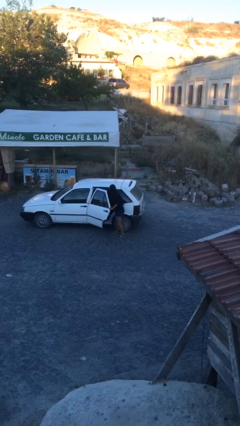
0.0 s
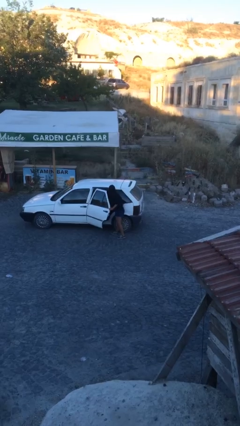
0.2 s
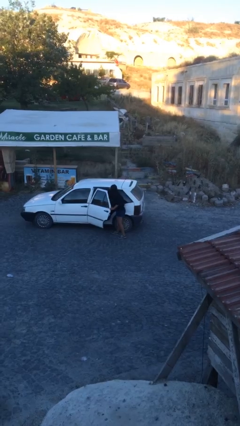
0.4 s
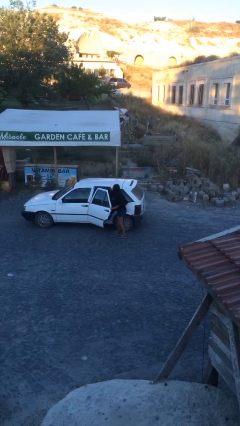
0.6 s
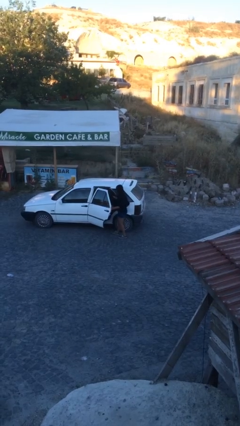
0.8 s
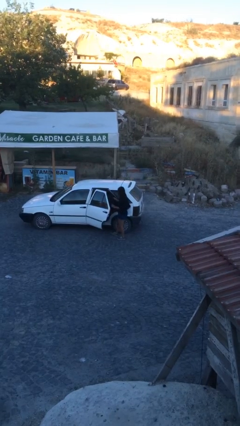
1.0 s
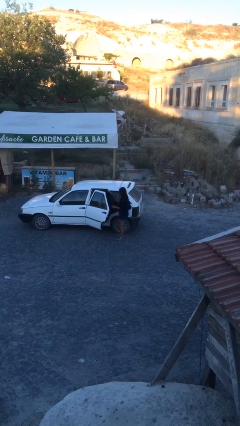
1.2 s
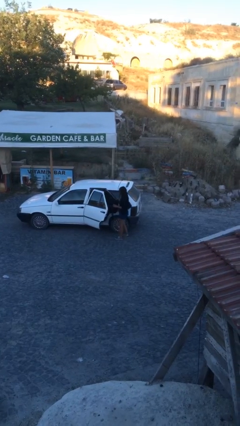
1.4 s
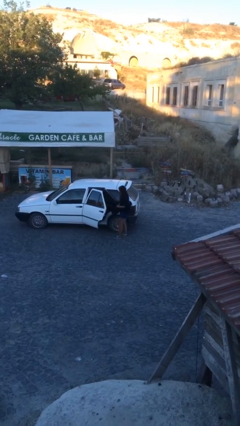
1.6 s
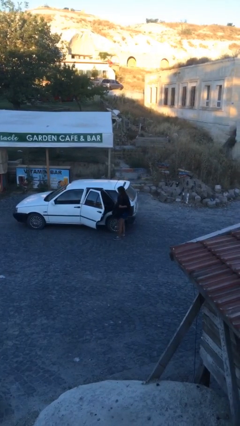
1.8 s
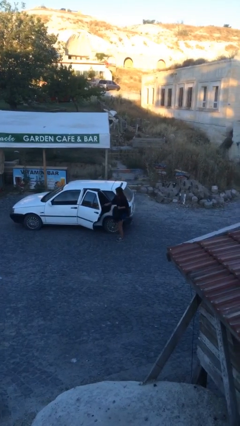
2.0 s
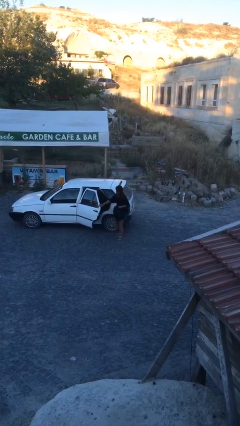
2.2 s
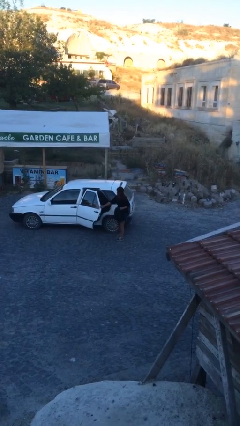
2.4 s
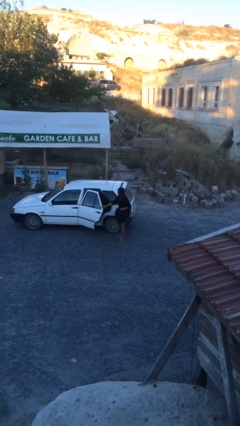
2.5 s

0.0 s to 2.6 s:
person unloads car

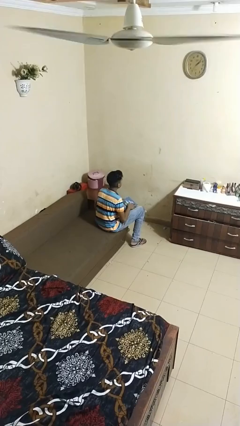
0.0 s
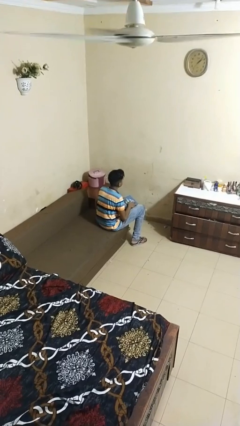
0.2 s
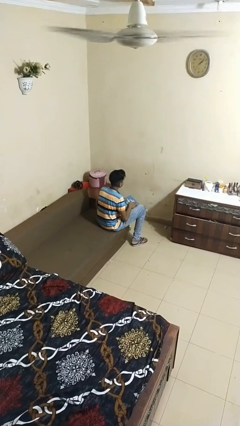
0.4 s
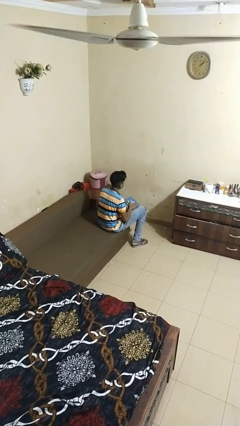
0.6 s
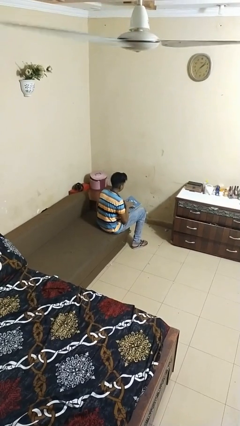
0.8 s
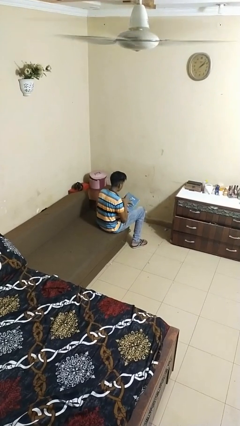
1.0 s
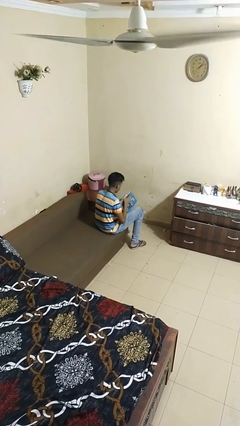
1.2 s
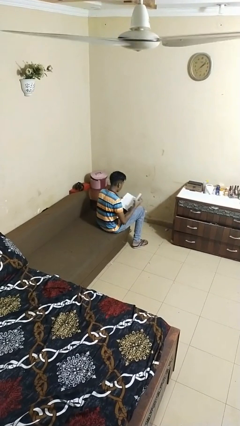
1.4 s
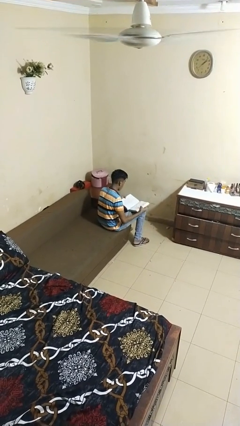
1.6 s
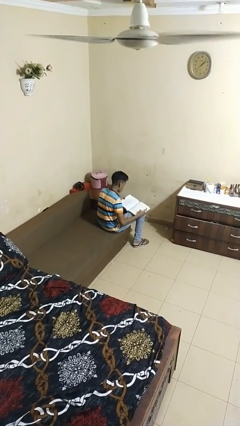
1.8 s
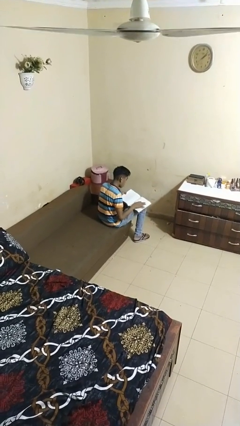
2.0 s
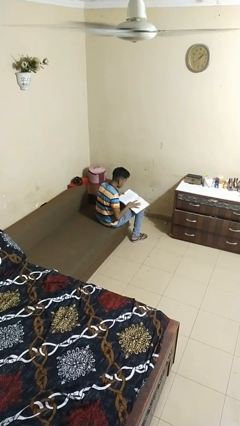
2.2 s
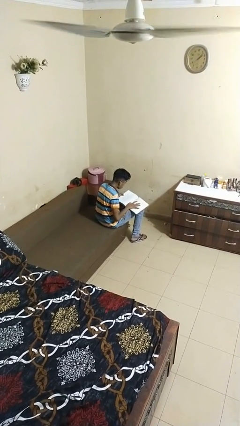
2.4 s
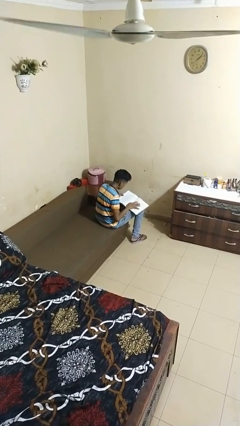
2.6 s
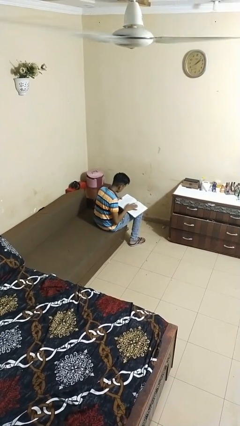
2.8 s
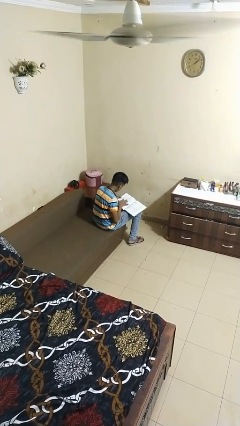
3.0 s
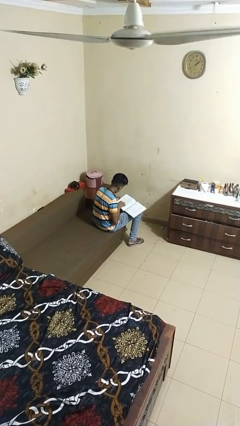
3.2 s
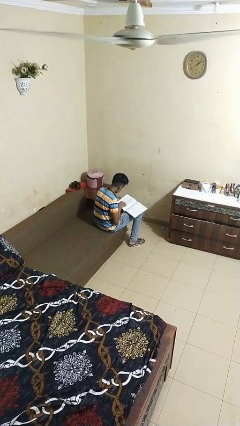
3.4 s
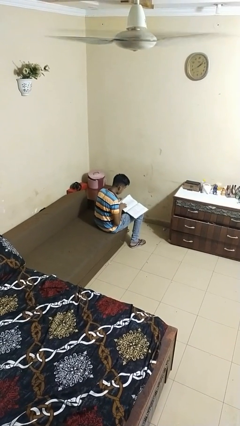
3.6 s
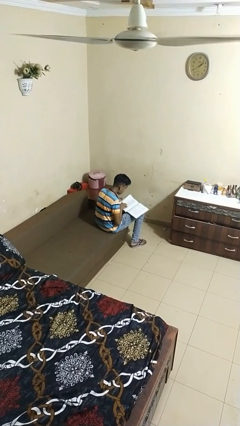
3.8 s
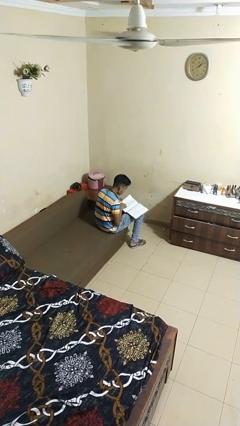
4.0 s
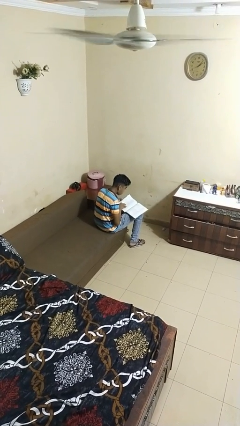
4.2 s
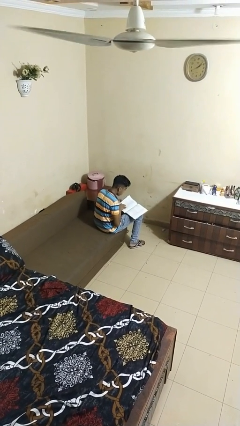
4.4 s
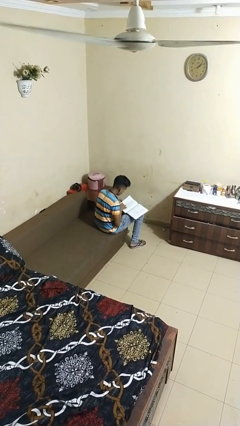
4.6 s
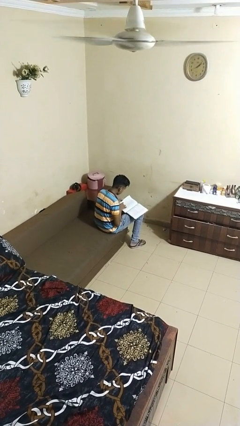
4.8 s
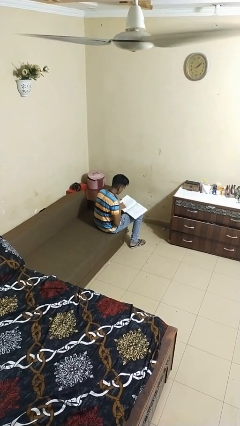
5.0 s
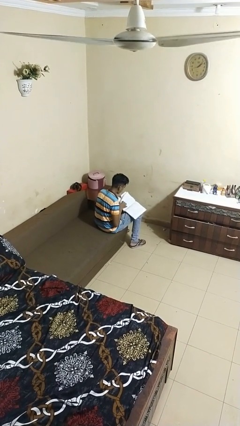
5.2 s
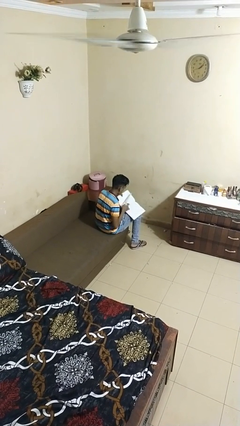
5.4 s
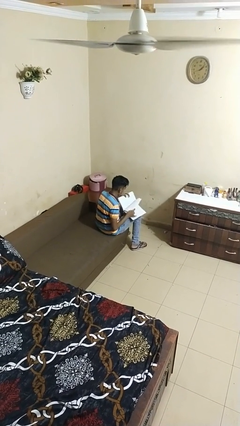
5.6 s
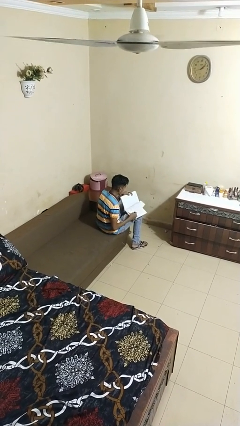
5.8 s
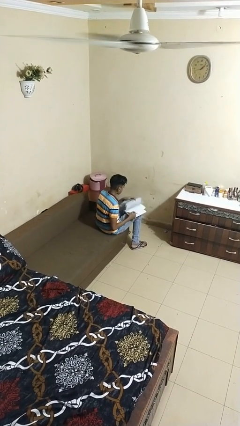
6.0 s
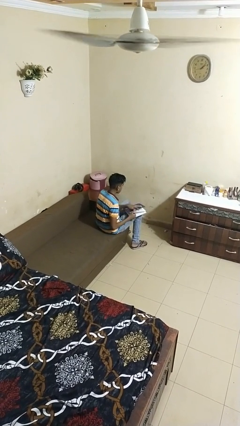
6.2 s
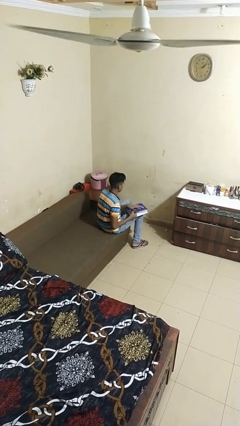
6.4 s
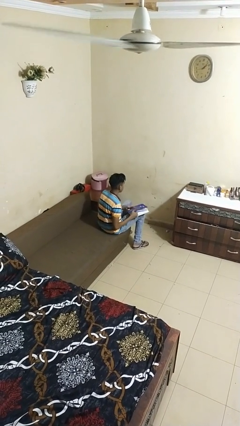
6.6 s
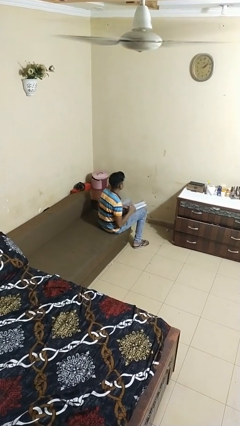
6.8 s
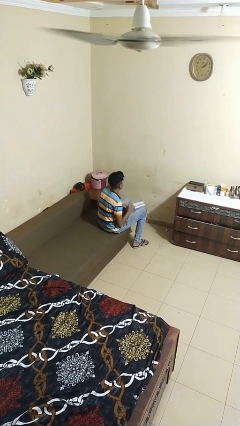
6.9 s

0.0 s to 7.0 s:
person reads book

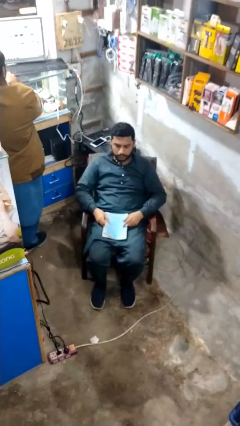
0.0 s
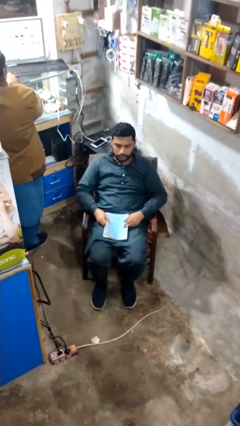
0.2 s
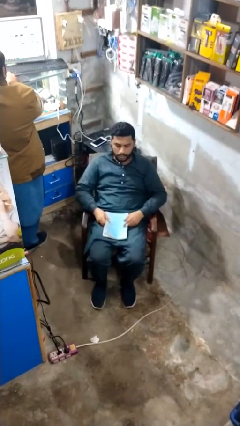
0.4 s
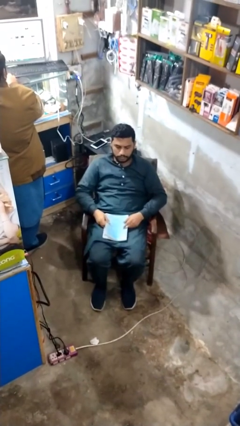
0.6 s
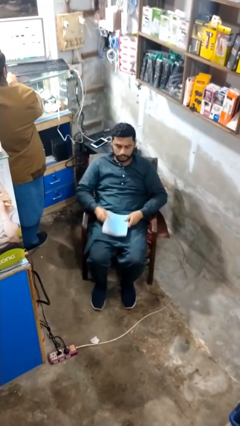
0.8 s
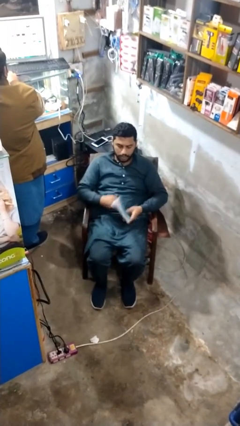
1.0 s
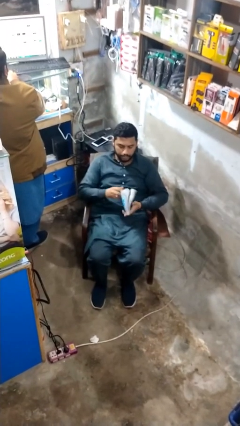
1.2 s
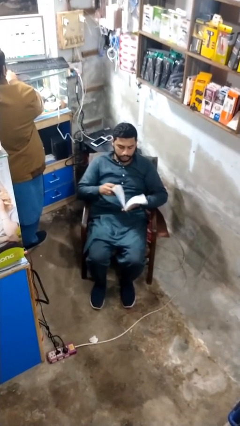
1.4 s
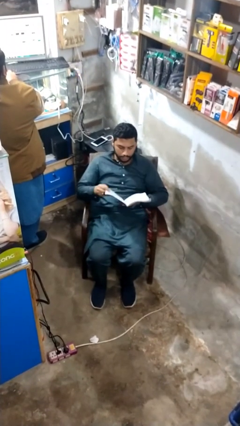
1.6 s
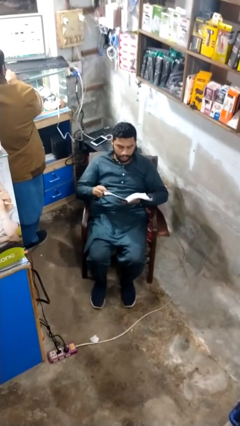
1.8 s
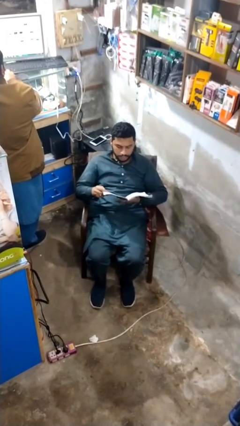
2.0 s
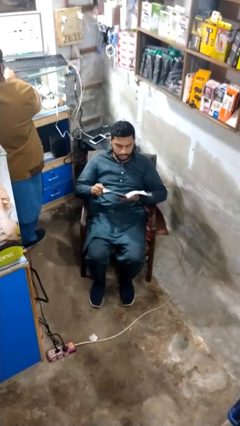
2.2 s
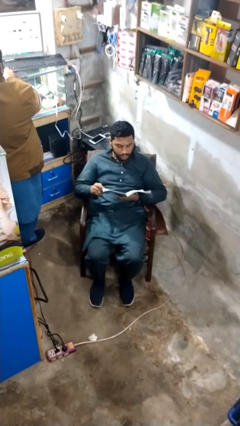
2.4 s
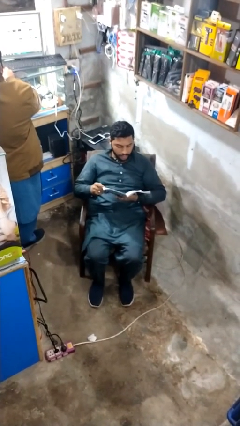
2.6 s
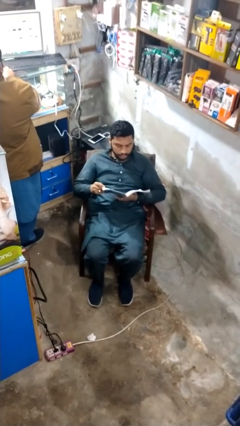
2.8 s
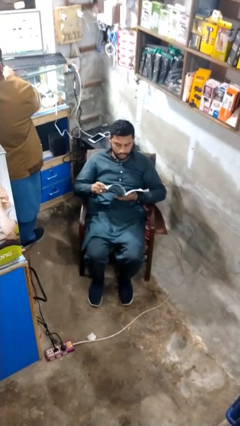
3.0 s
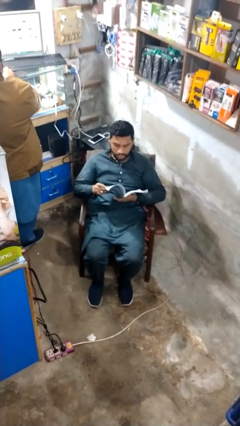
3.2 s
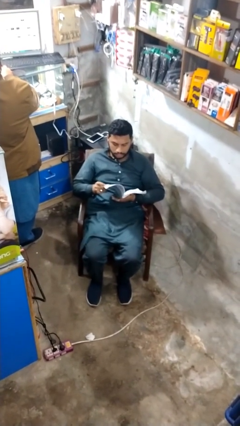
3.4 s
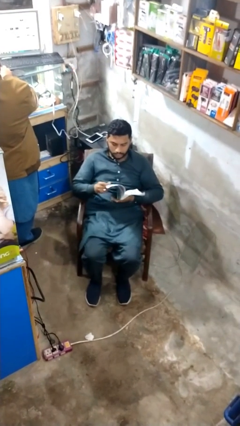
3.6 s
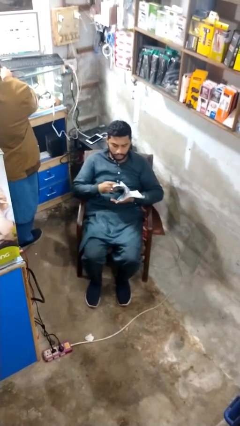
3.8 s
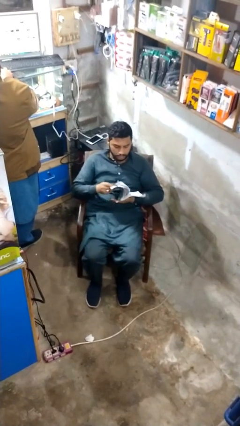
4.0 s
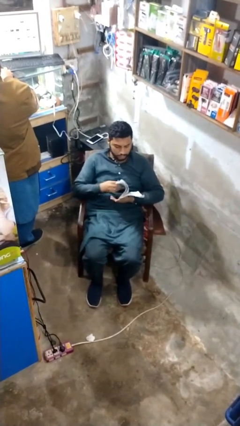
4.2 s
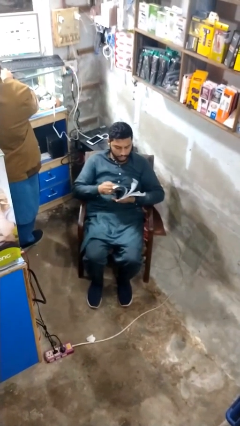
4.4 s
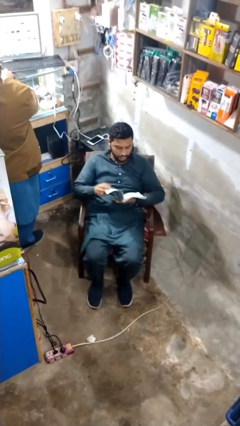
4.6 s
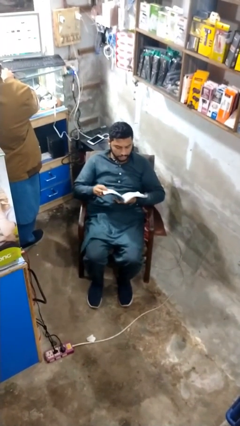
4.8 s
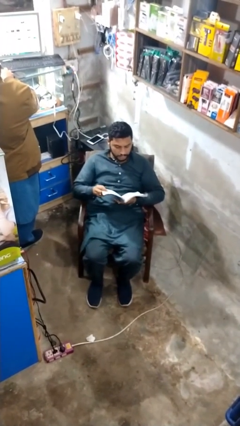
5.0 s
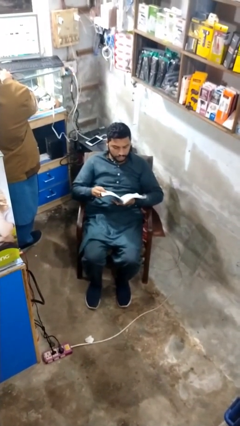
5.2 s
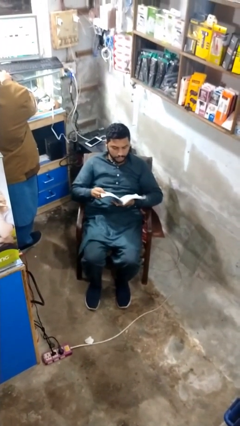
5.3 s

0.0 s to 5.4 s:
person reads document

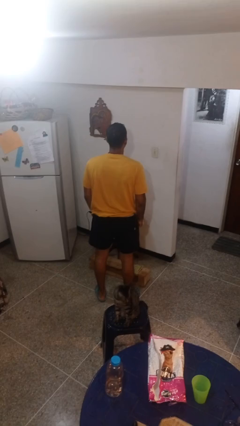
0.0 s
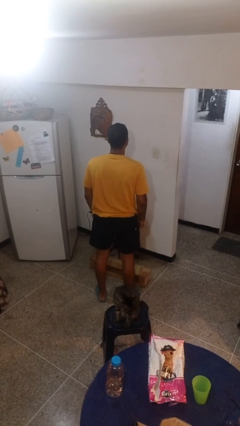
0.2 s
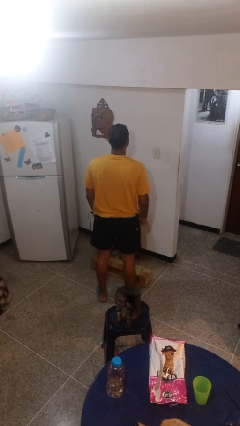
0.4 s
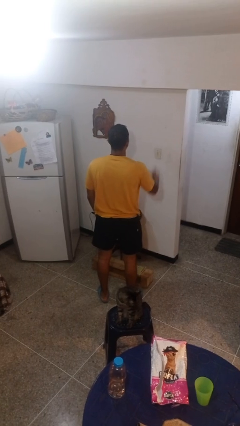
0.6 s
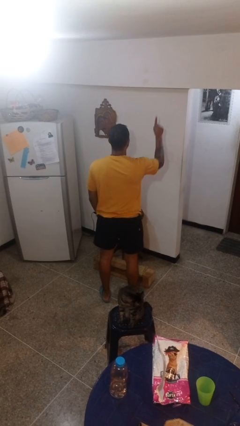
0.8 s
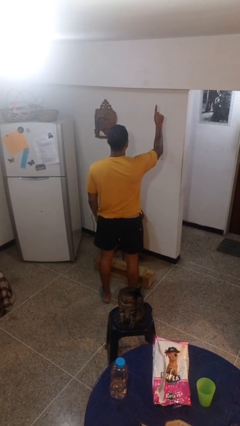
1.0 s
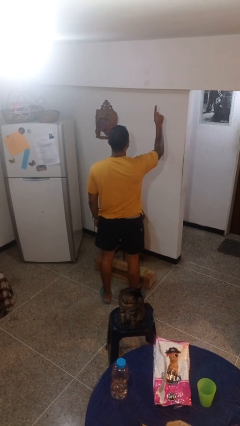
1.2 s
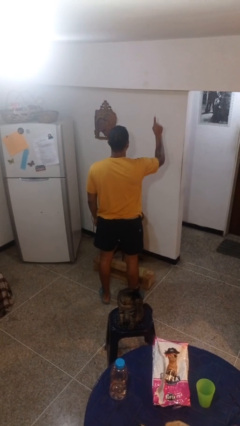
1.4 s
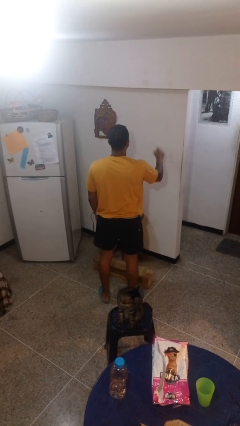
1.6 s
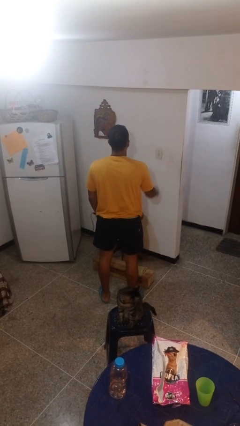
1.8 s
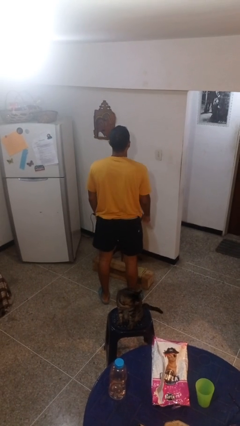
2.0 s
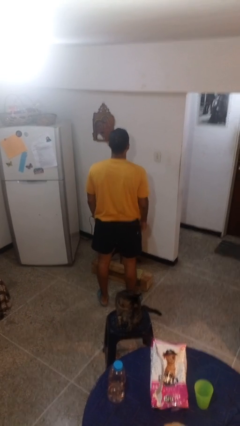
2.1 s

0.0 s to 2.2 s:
person gestures number one
